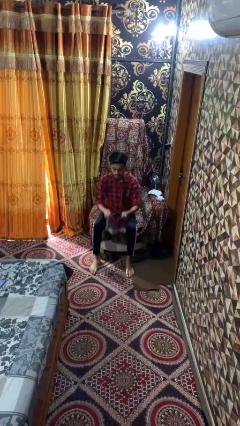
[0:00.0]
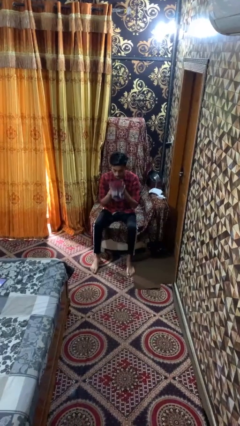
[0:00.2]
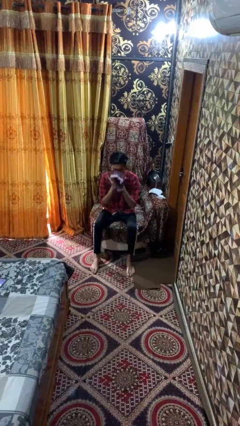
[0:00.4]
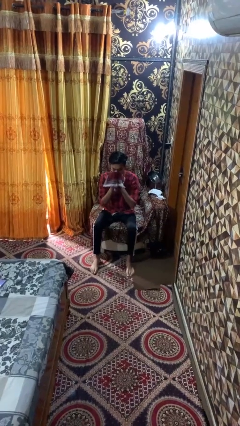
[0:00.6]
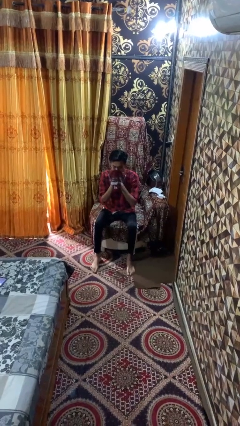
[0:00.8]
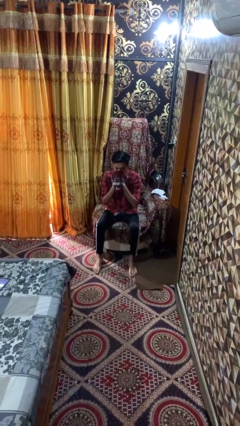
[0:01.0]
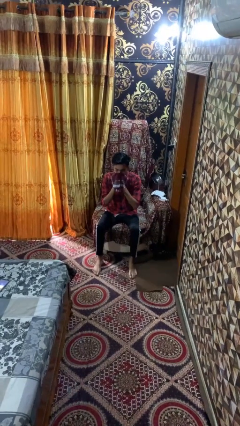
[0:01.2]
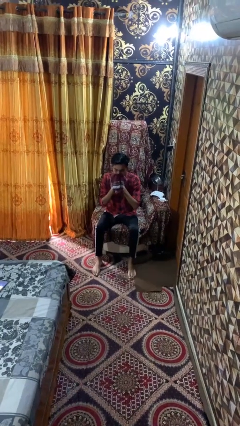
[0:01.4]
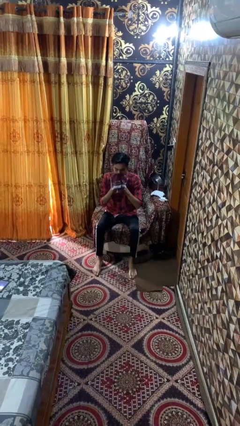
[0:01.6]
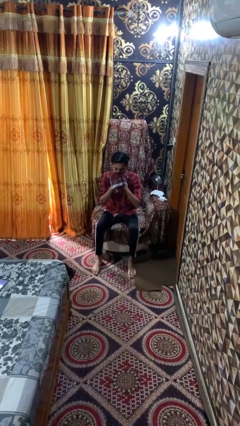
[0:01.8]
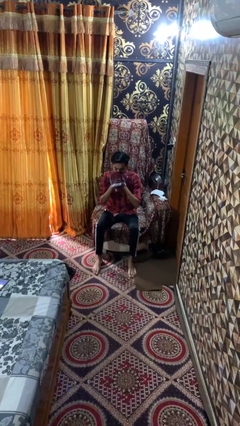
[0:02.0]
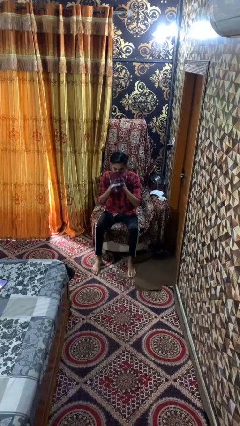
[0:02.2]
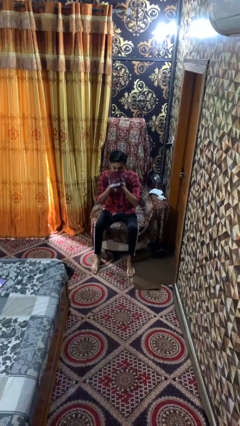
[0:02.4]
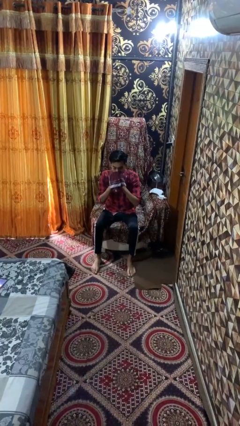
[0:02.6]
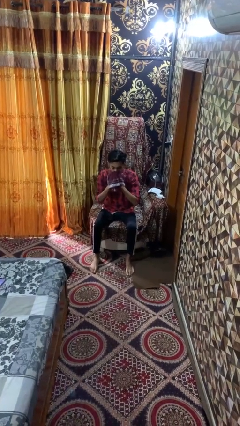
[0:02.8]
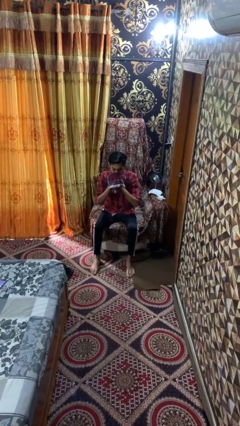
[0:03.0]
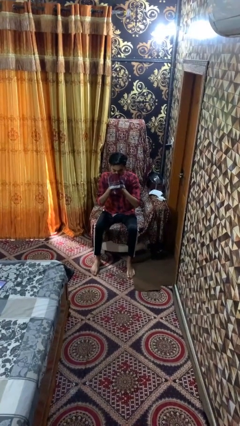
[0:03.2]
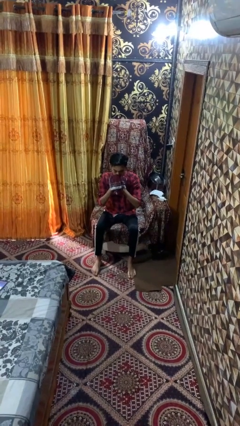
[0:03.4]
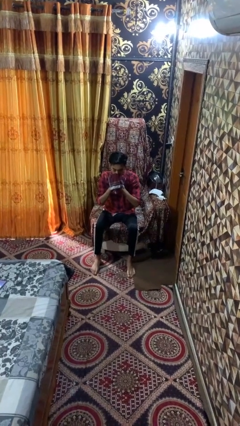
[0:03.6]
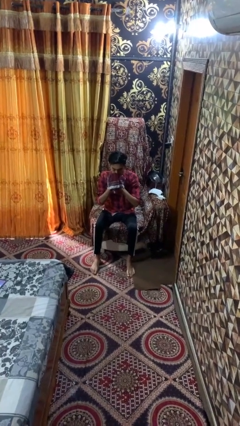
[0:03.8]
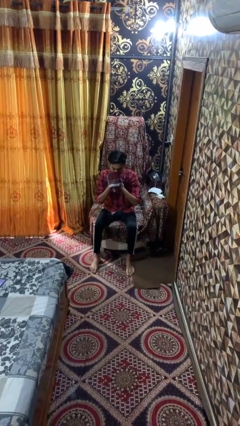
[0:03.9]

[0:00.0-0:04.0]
person blows nose

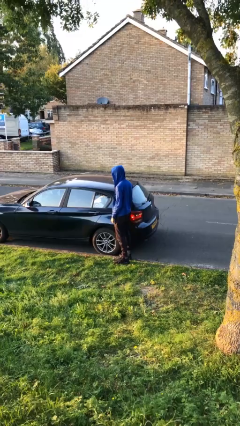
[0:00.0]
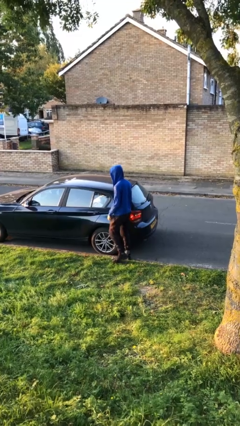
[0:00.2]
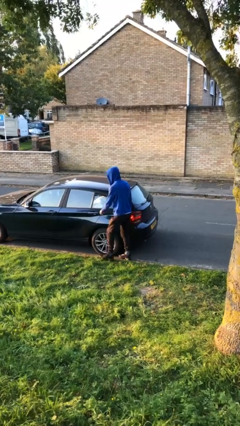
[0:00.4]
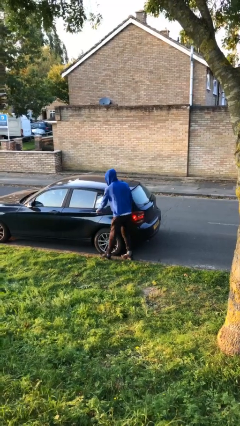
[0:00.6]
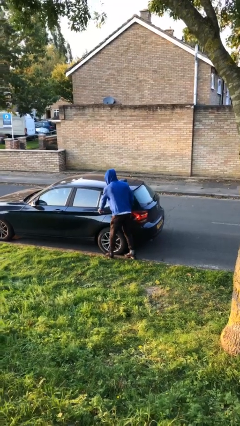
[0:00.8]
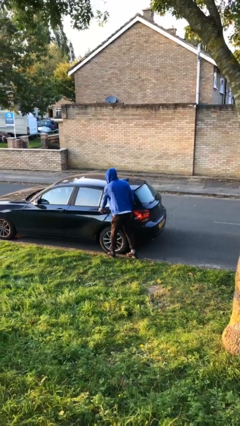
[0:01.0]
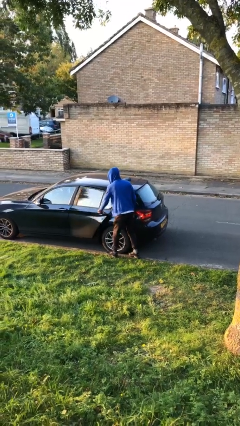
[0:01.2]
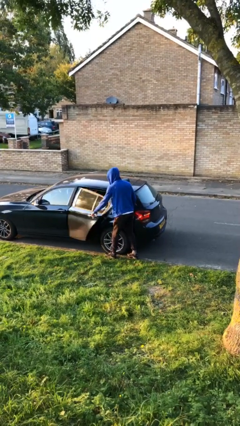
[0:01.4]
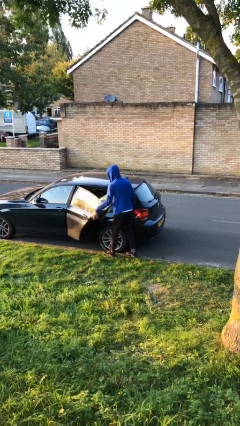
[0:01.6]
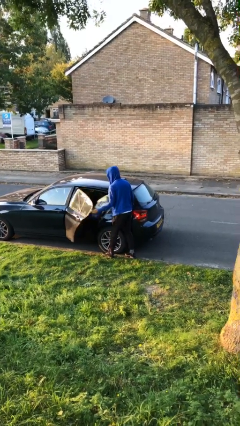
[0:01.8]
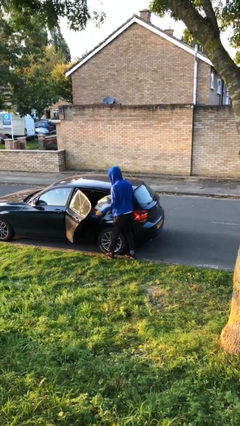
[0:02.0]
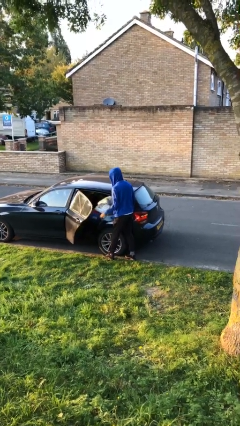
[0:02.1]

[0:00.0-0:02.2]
person opens car door

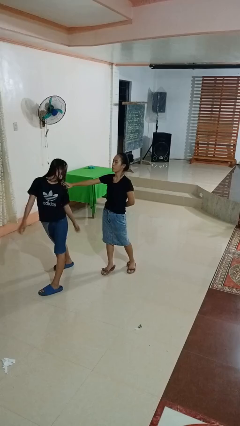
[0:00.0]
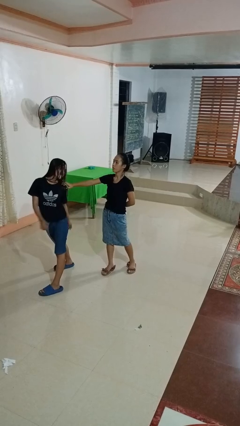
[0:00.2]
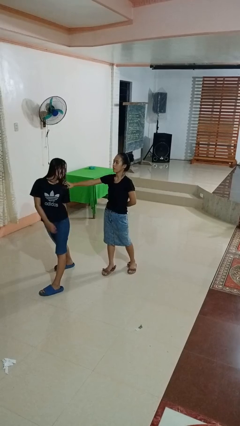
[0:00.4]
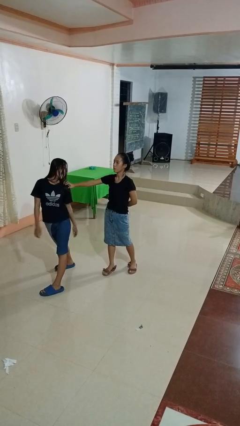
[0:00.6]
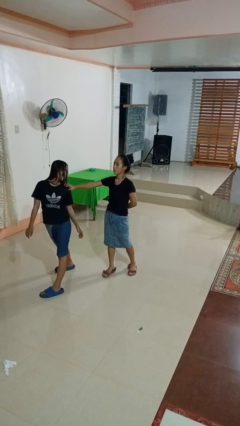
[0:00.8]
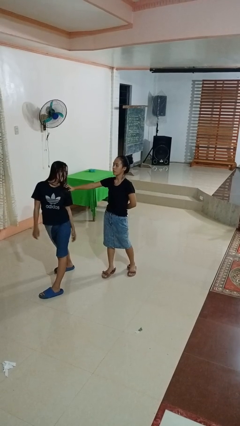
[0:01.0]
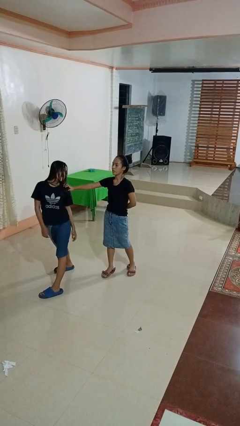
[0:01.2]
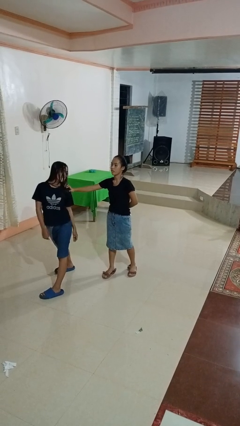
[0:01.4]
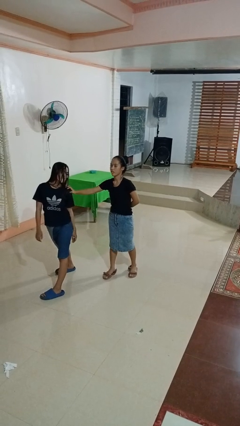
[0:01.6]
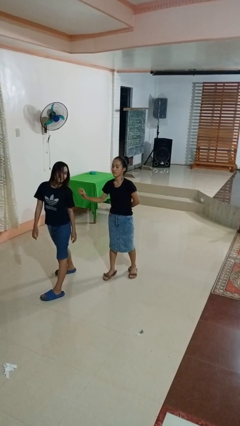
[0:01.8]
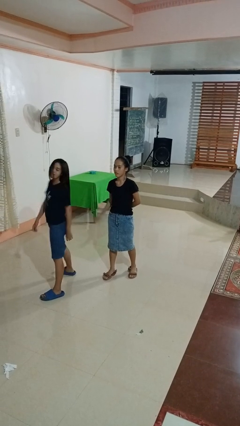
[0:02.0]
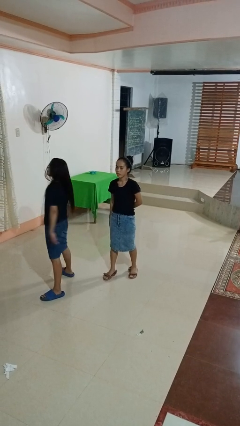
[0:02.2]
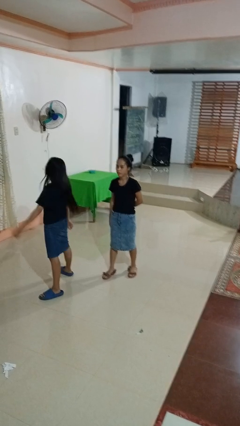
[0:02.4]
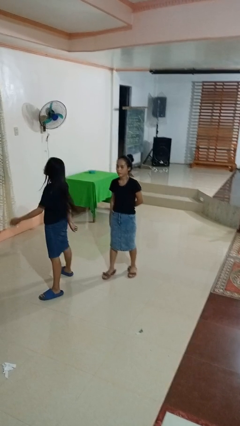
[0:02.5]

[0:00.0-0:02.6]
person spins person around

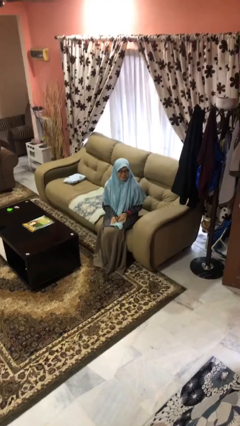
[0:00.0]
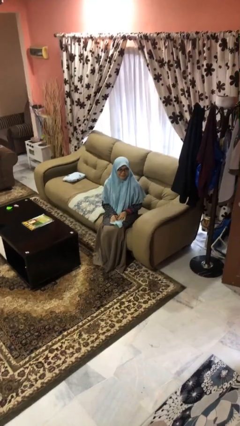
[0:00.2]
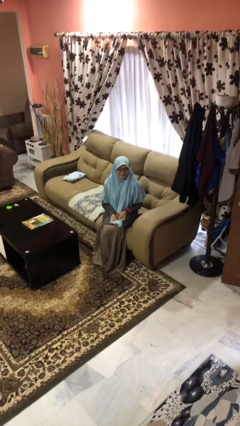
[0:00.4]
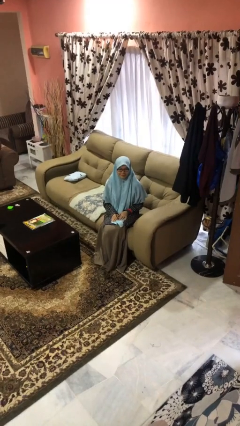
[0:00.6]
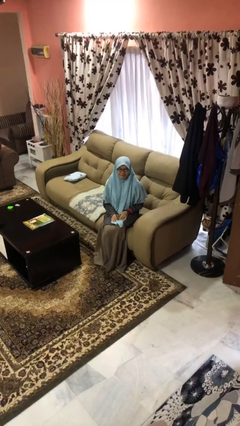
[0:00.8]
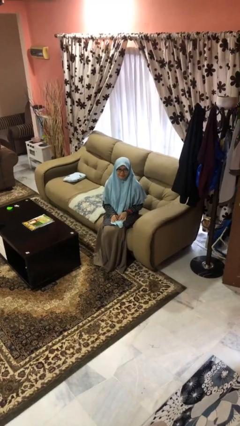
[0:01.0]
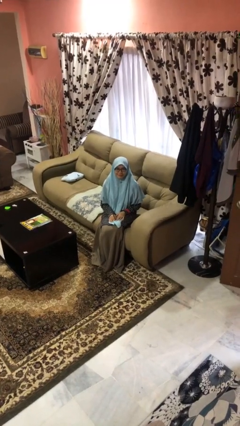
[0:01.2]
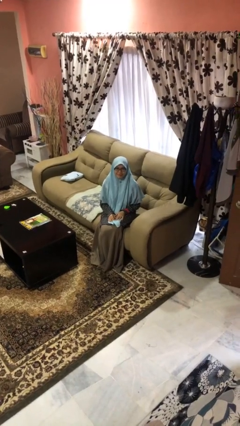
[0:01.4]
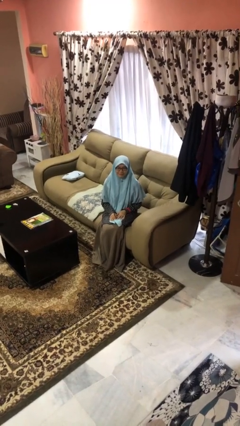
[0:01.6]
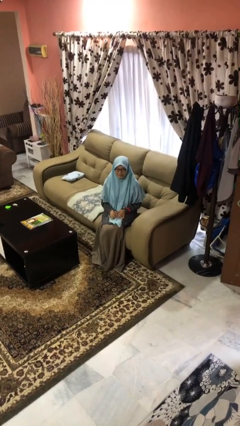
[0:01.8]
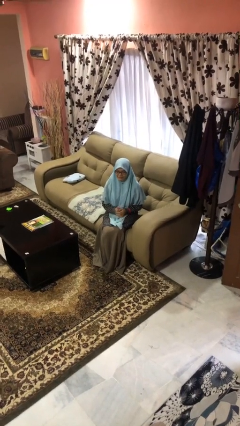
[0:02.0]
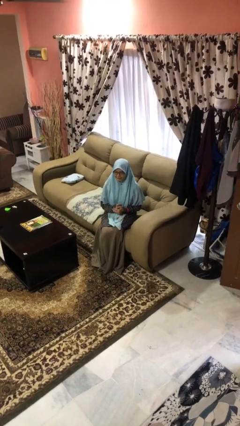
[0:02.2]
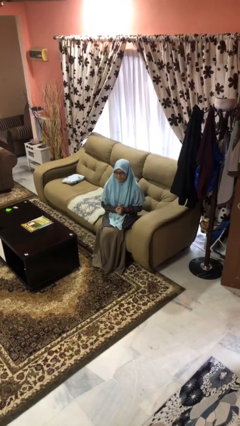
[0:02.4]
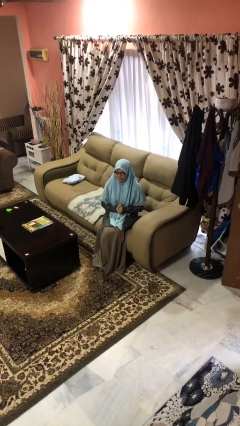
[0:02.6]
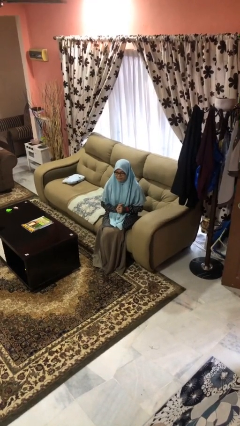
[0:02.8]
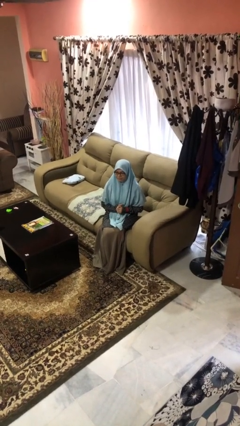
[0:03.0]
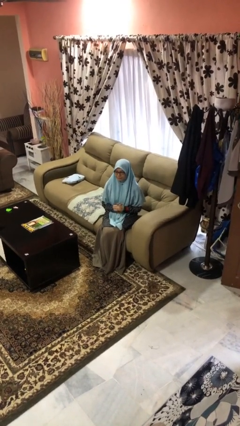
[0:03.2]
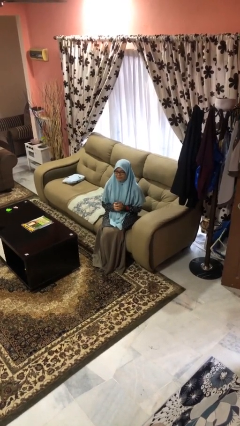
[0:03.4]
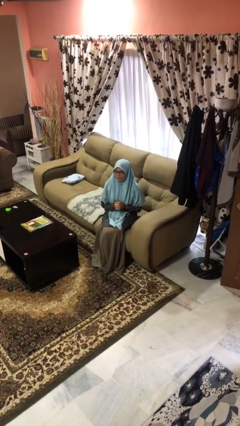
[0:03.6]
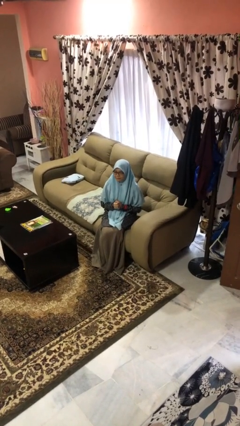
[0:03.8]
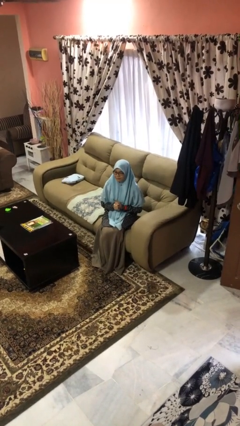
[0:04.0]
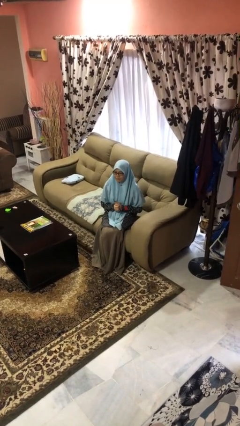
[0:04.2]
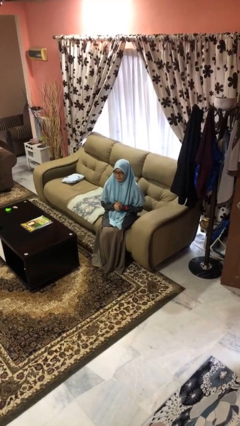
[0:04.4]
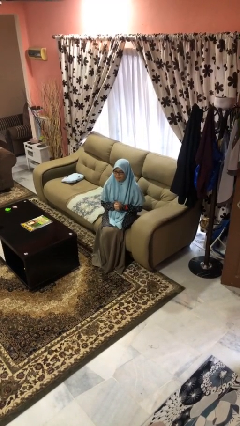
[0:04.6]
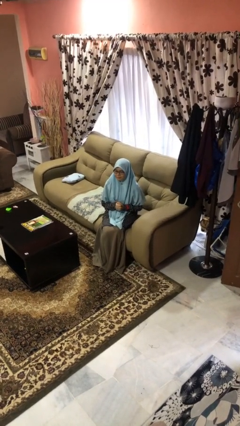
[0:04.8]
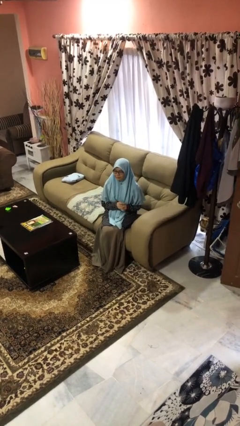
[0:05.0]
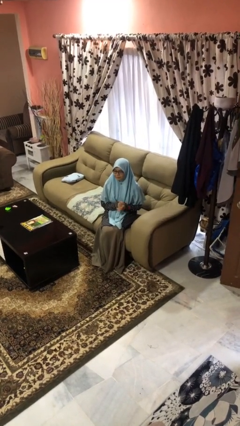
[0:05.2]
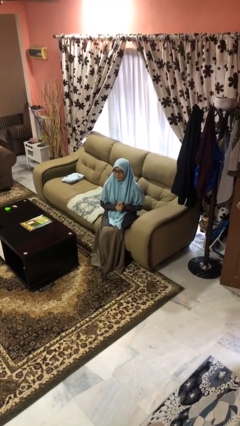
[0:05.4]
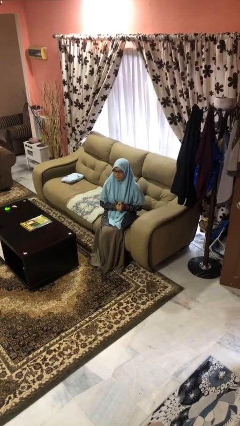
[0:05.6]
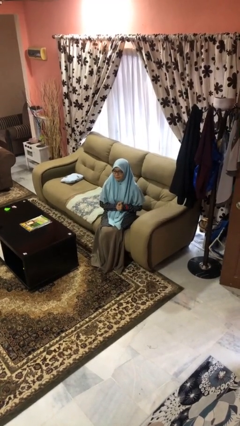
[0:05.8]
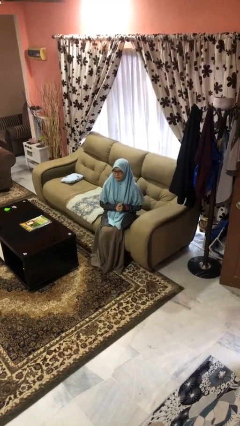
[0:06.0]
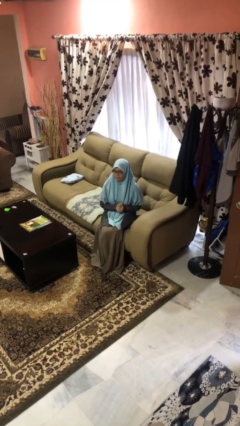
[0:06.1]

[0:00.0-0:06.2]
person cracks knuckles

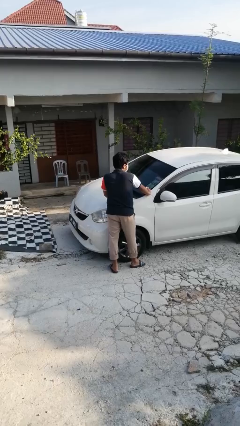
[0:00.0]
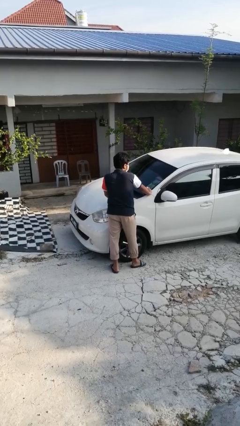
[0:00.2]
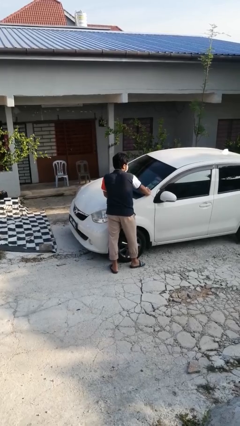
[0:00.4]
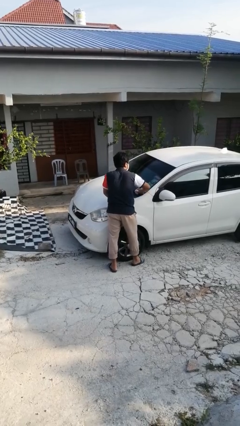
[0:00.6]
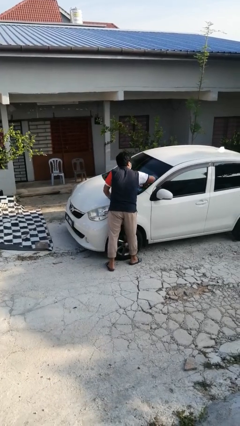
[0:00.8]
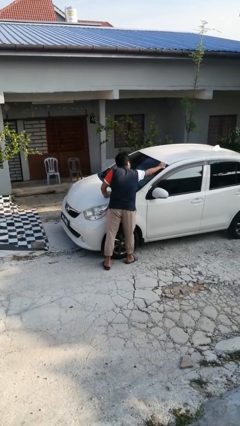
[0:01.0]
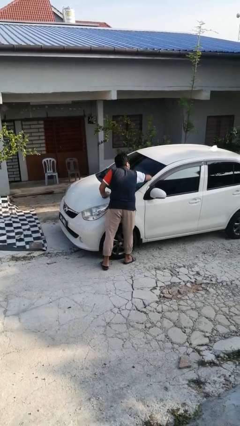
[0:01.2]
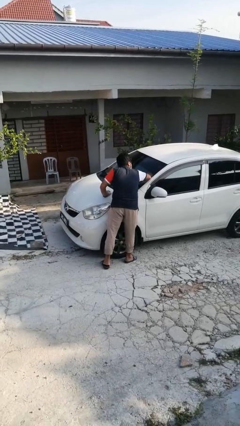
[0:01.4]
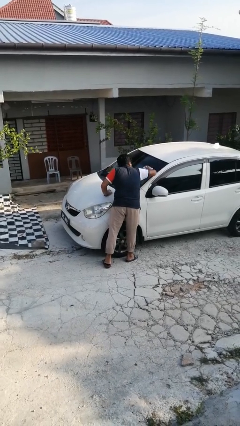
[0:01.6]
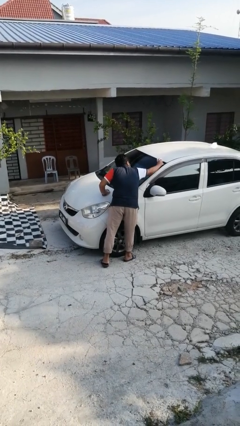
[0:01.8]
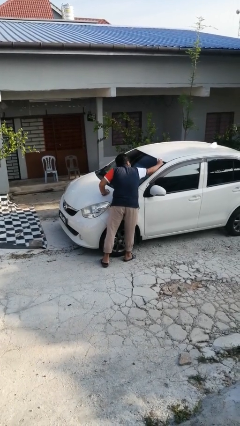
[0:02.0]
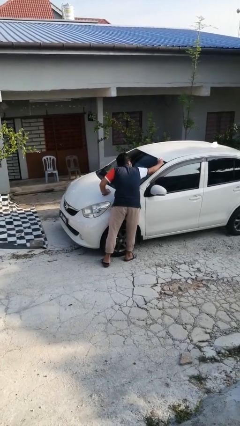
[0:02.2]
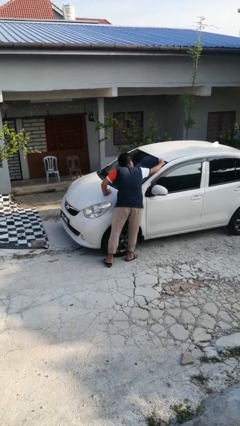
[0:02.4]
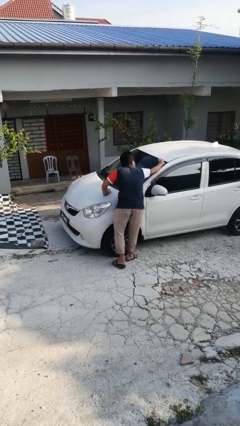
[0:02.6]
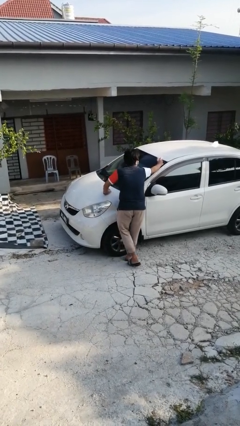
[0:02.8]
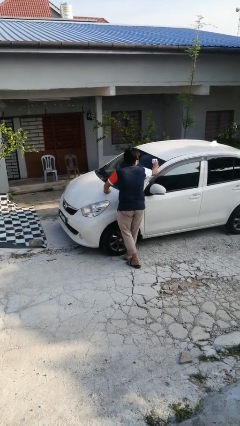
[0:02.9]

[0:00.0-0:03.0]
person polishes car with rag
